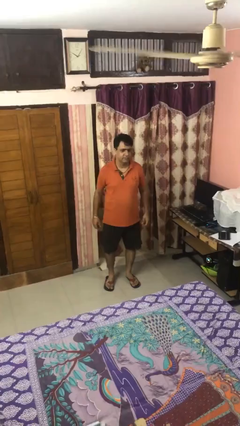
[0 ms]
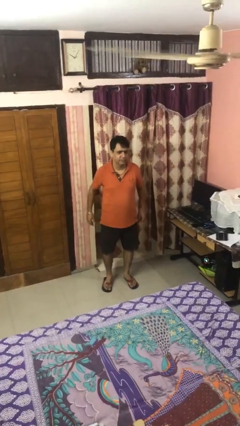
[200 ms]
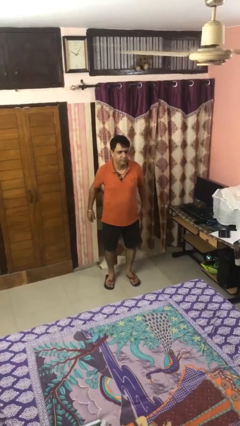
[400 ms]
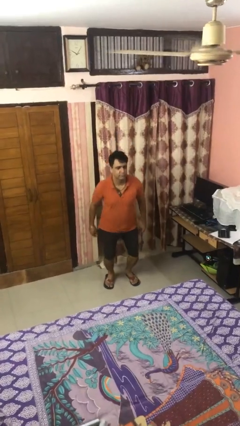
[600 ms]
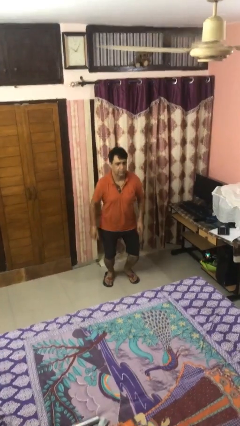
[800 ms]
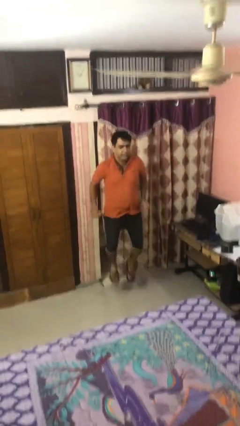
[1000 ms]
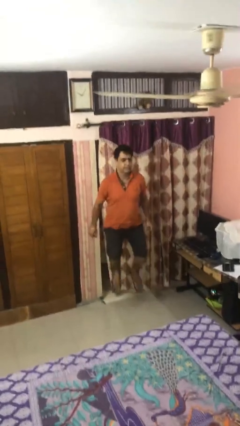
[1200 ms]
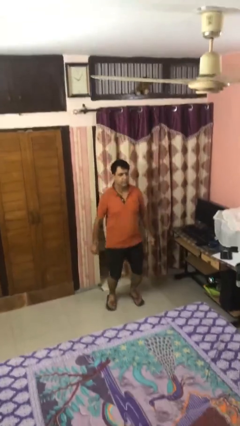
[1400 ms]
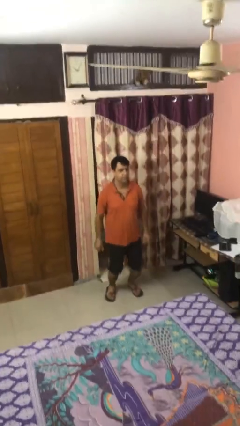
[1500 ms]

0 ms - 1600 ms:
person jumps

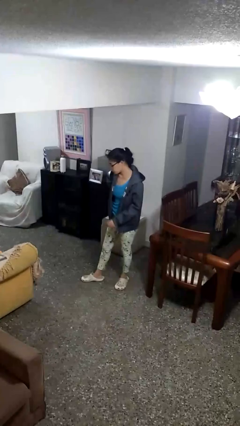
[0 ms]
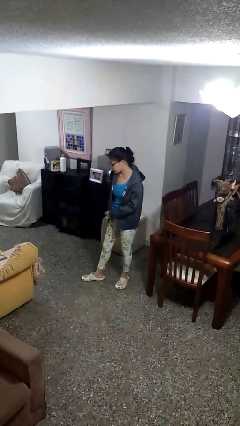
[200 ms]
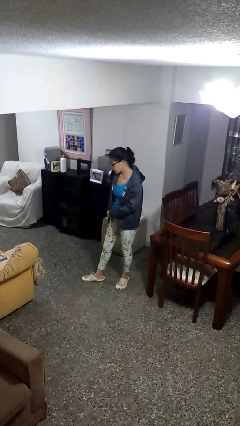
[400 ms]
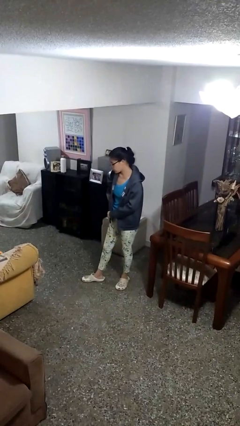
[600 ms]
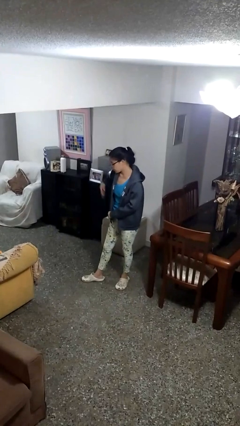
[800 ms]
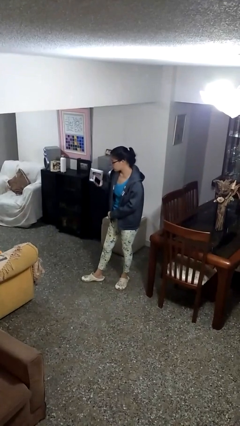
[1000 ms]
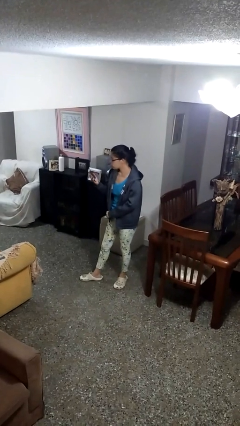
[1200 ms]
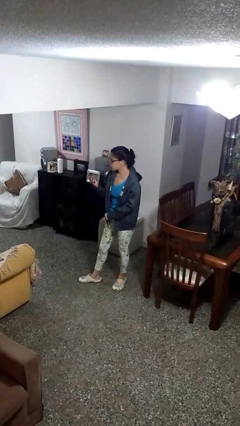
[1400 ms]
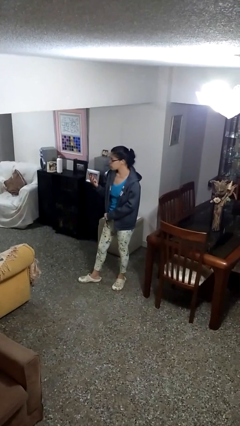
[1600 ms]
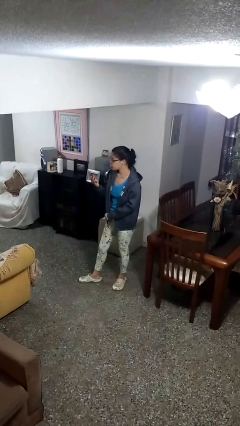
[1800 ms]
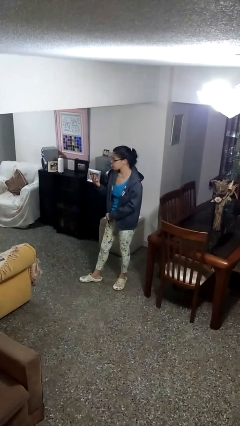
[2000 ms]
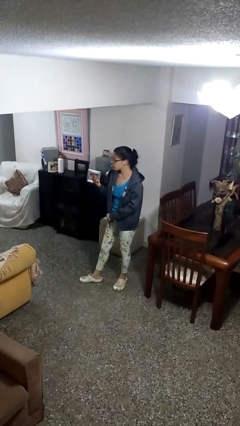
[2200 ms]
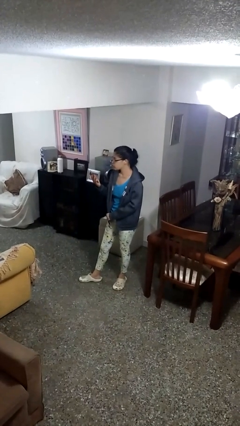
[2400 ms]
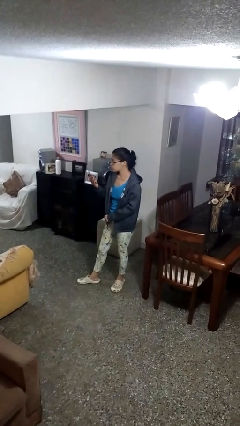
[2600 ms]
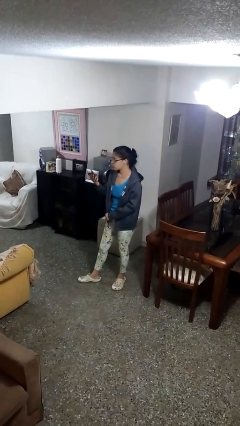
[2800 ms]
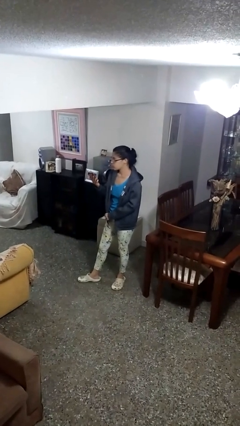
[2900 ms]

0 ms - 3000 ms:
person takes phone from pocket

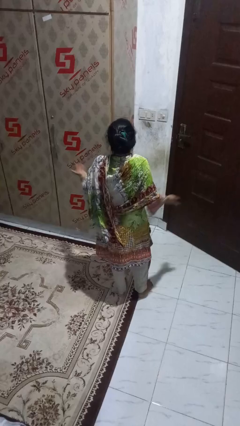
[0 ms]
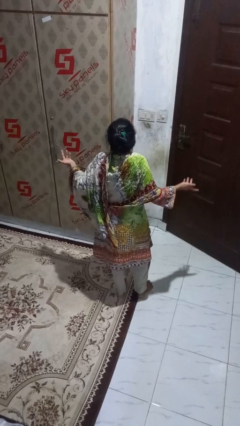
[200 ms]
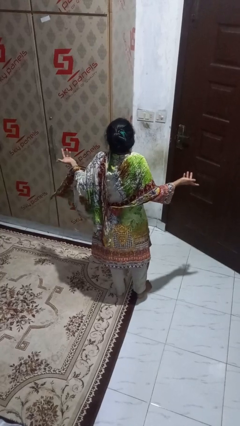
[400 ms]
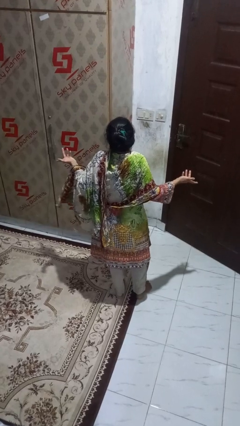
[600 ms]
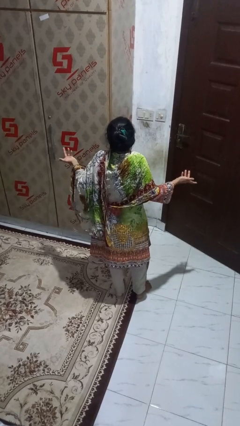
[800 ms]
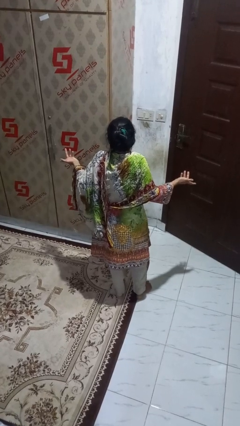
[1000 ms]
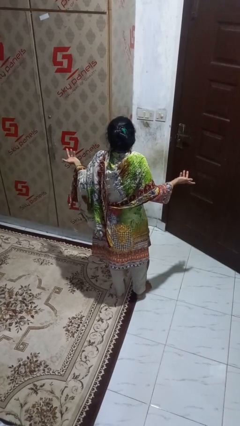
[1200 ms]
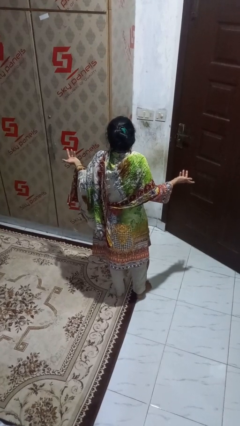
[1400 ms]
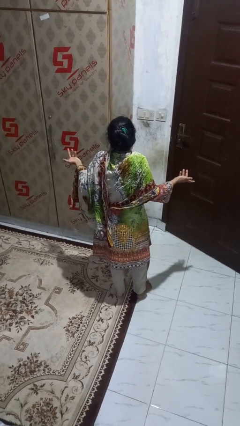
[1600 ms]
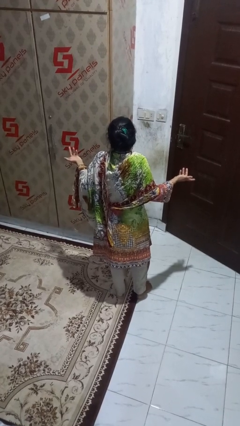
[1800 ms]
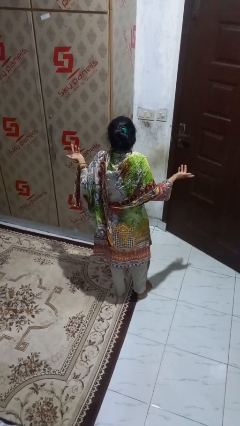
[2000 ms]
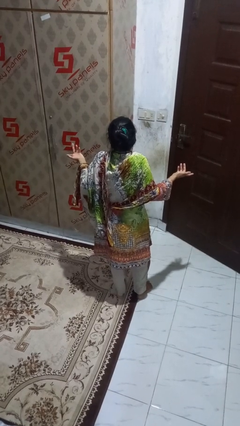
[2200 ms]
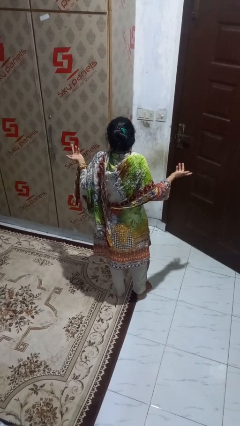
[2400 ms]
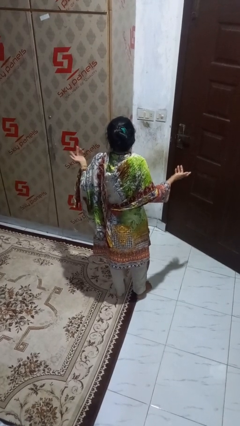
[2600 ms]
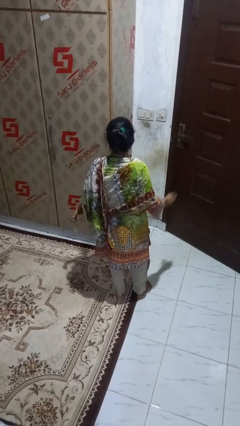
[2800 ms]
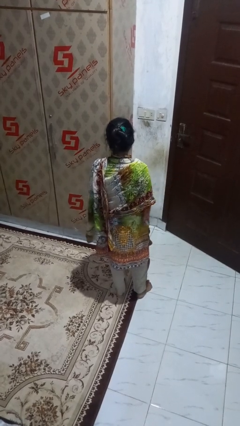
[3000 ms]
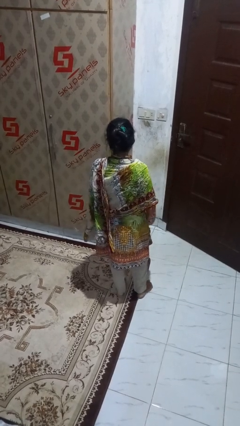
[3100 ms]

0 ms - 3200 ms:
person shrugs

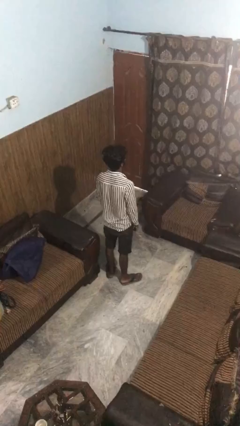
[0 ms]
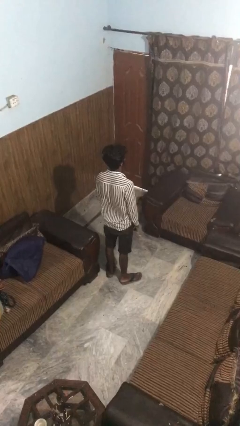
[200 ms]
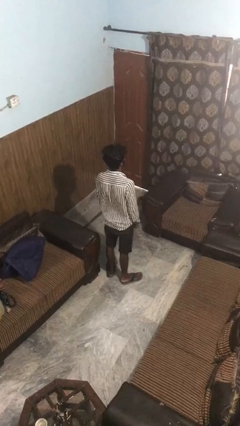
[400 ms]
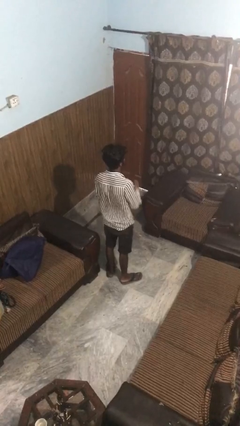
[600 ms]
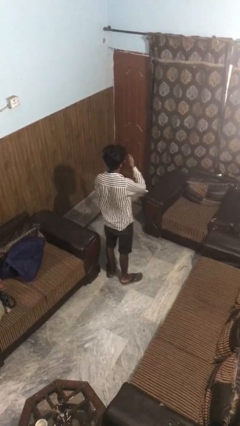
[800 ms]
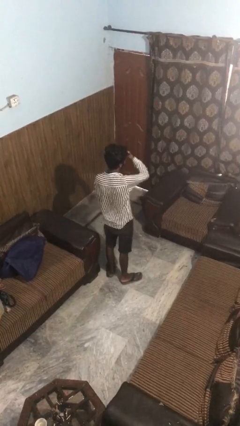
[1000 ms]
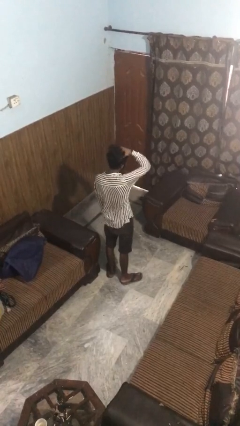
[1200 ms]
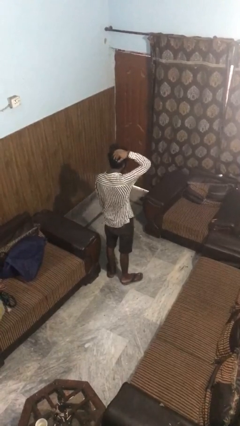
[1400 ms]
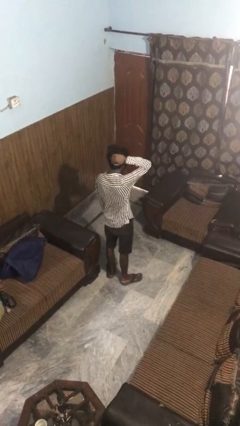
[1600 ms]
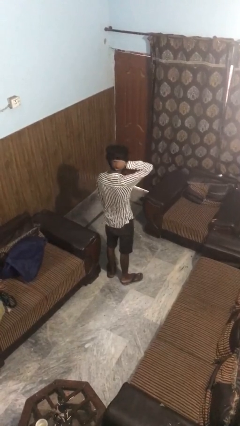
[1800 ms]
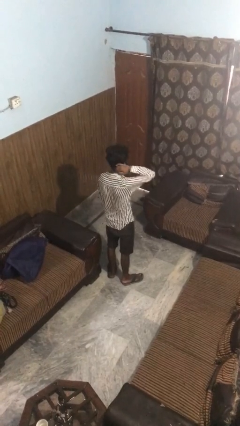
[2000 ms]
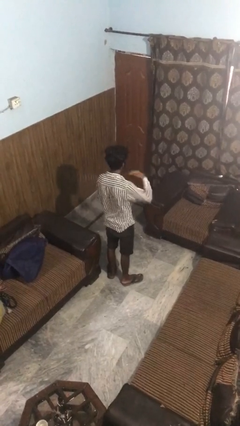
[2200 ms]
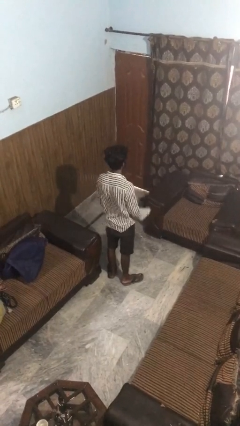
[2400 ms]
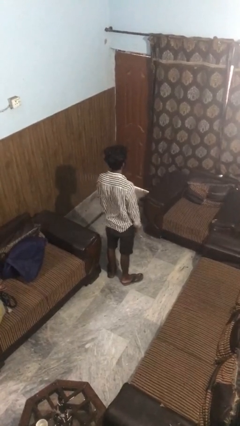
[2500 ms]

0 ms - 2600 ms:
person strokes hair

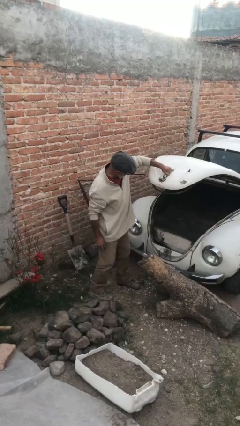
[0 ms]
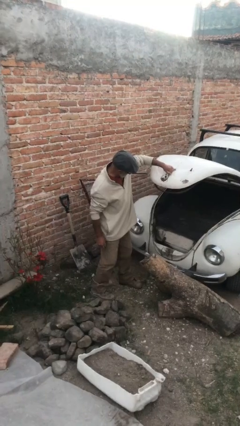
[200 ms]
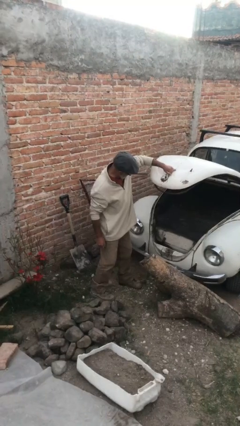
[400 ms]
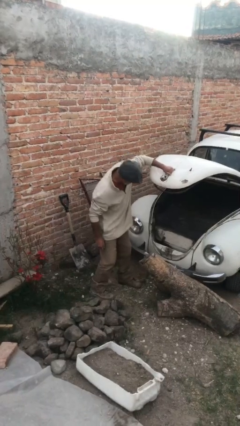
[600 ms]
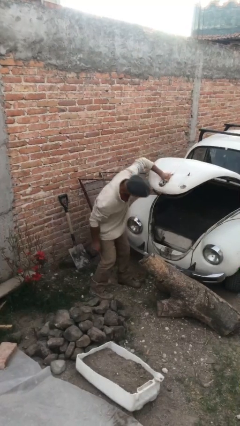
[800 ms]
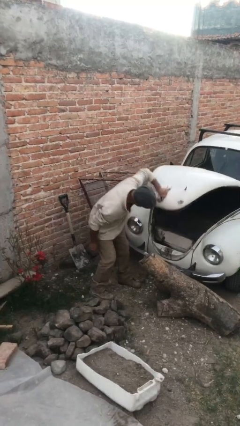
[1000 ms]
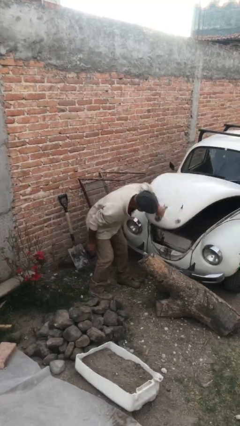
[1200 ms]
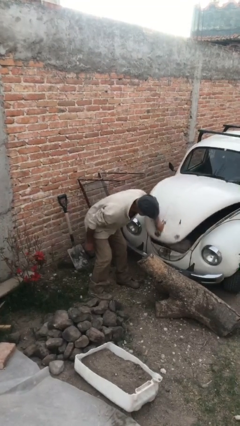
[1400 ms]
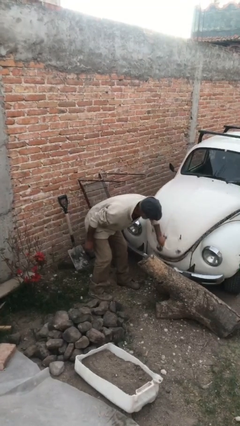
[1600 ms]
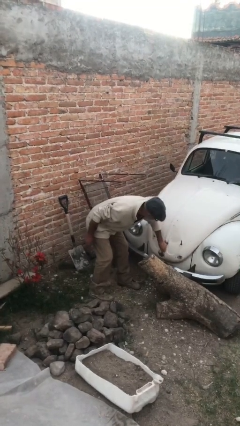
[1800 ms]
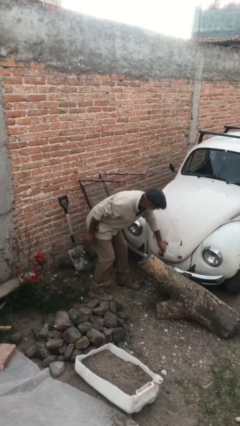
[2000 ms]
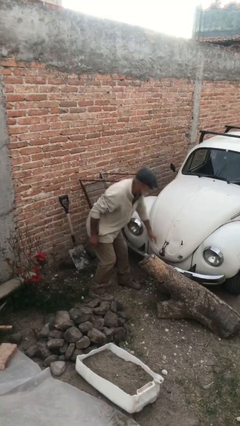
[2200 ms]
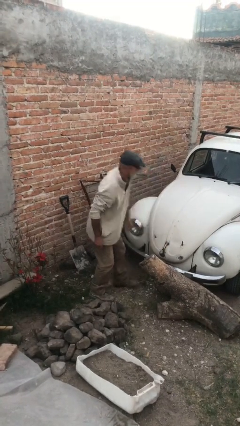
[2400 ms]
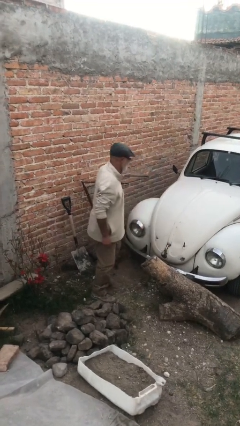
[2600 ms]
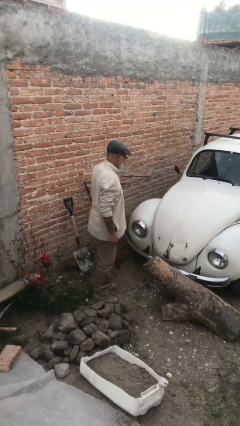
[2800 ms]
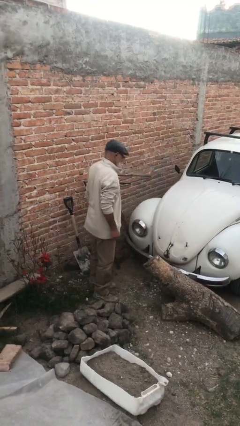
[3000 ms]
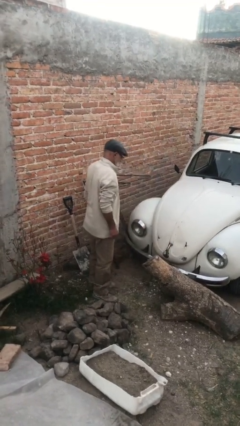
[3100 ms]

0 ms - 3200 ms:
person closes car trunk

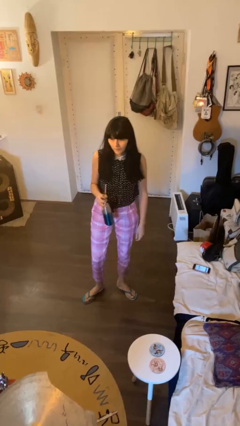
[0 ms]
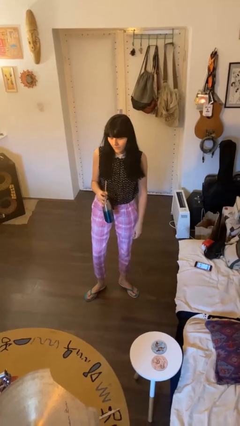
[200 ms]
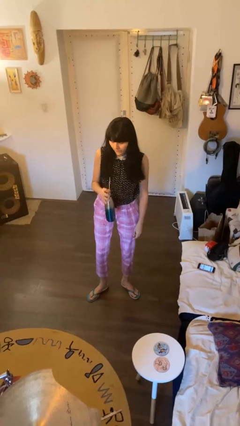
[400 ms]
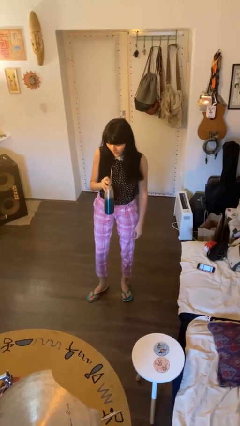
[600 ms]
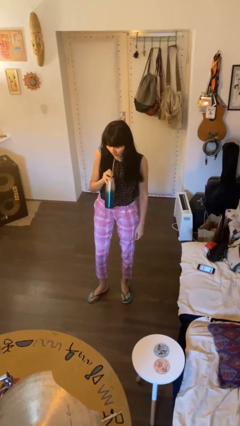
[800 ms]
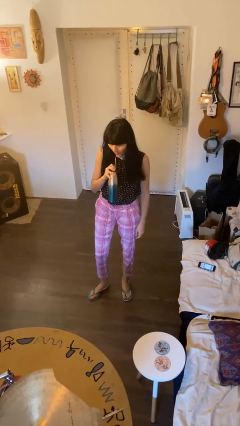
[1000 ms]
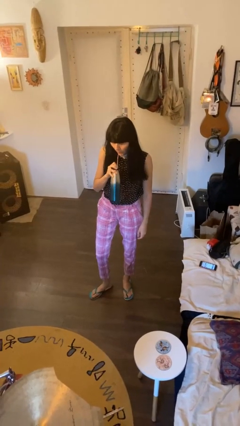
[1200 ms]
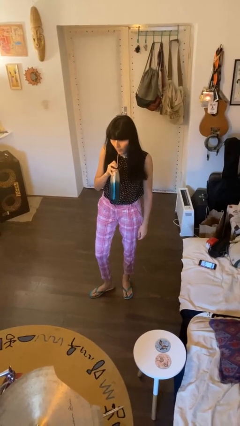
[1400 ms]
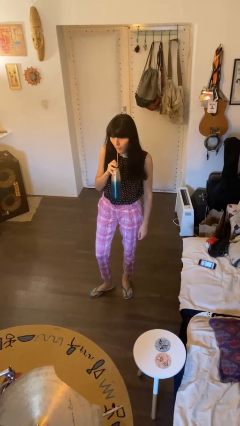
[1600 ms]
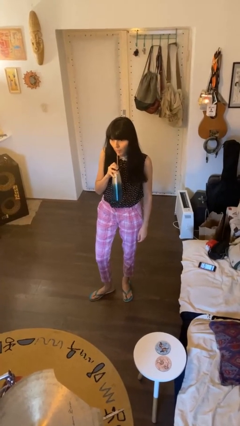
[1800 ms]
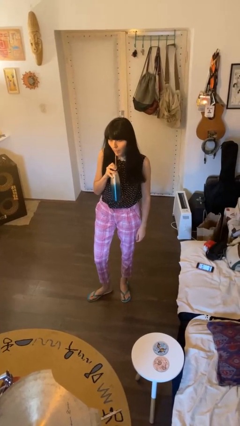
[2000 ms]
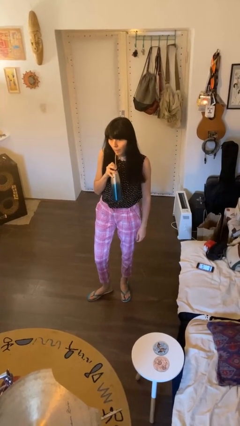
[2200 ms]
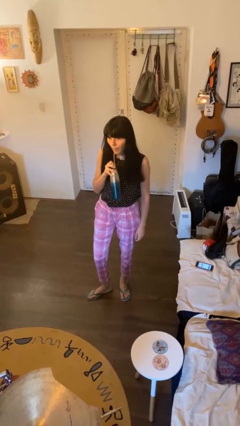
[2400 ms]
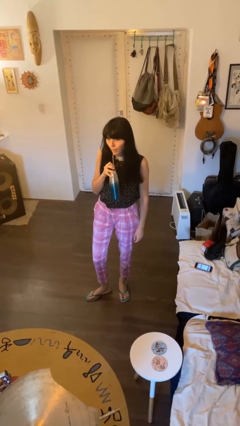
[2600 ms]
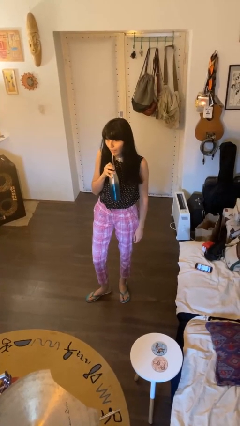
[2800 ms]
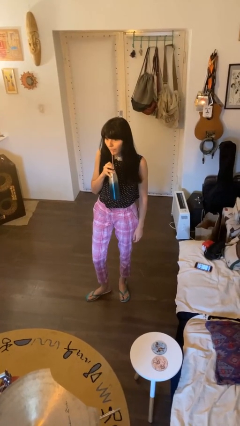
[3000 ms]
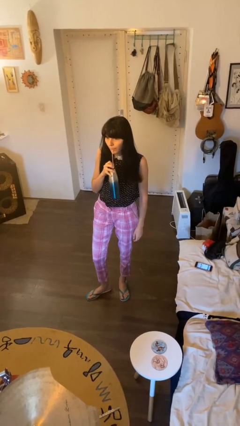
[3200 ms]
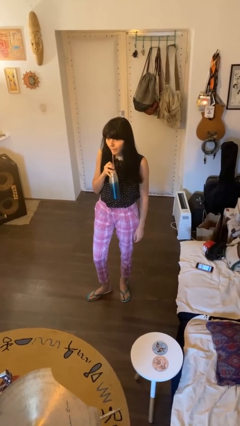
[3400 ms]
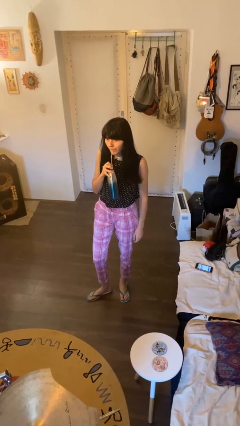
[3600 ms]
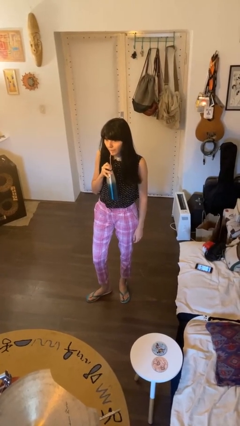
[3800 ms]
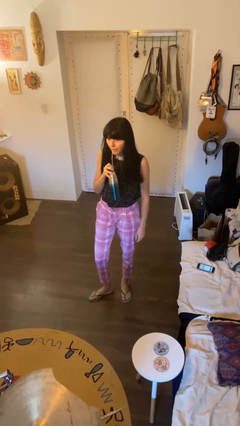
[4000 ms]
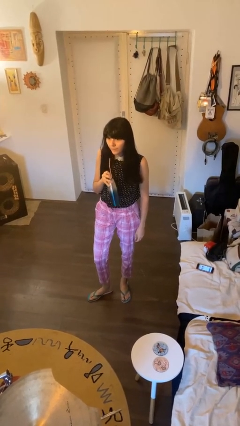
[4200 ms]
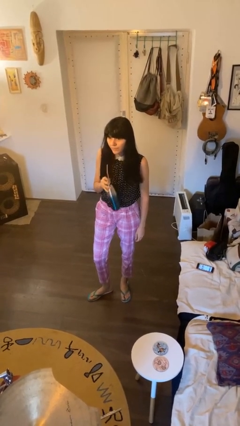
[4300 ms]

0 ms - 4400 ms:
person drinks from straw
